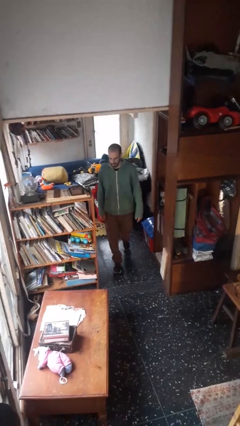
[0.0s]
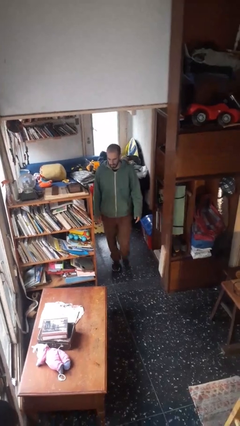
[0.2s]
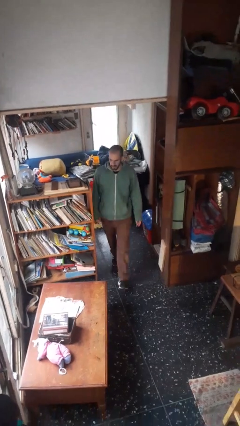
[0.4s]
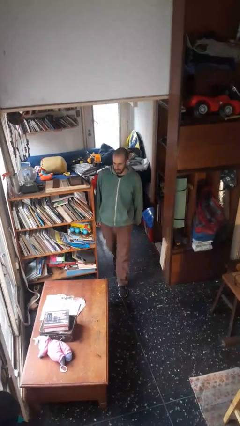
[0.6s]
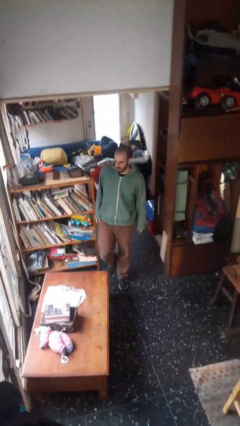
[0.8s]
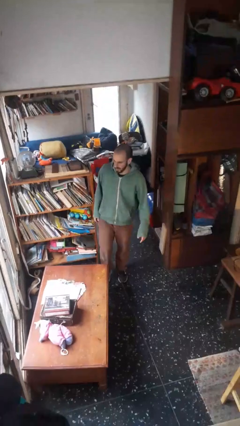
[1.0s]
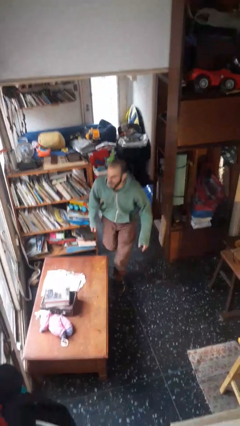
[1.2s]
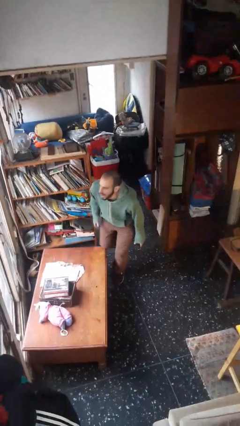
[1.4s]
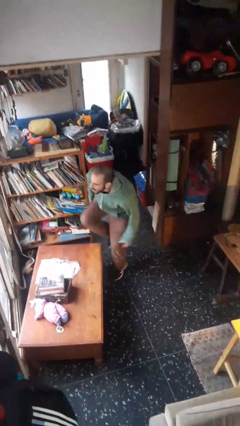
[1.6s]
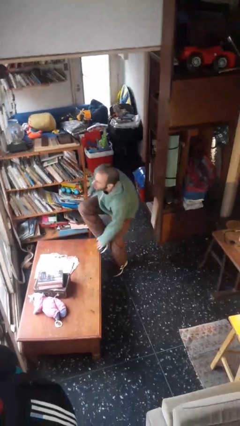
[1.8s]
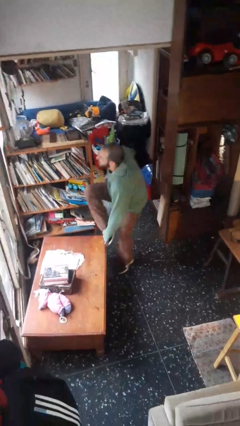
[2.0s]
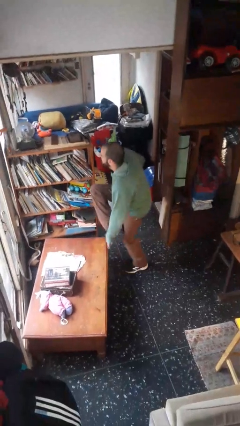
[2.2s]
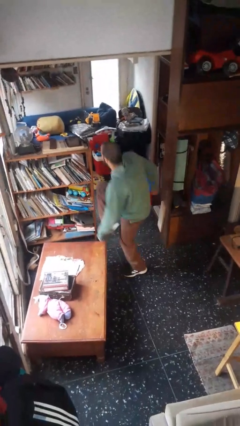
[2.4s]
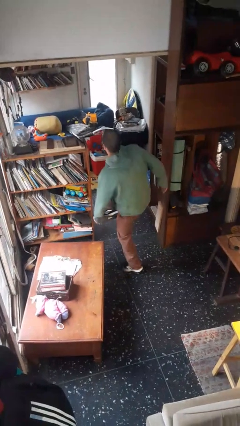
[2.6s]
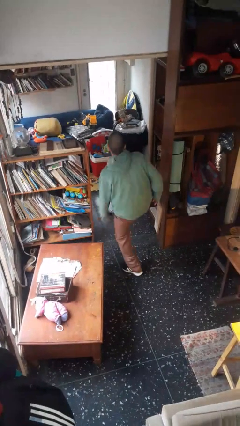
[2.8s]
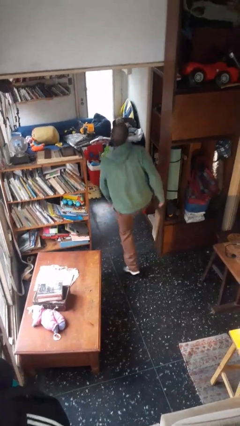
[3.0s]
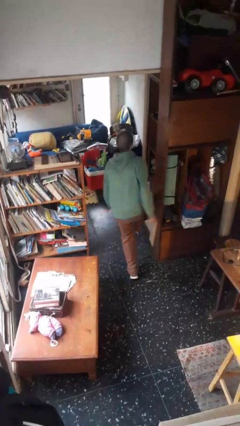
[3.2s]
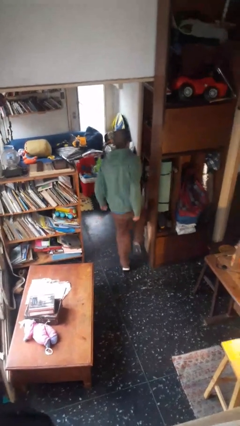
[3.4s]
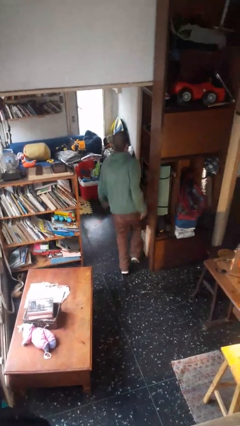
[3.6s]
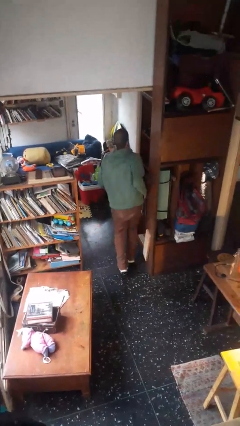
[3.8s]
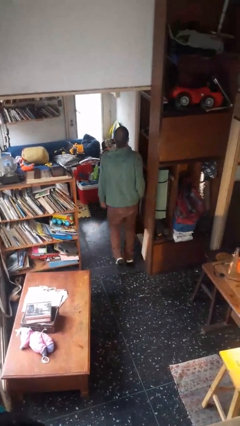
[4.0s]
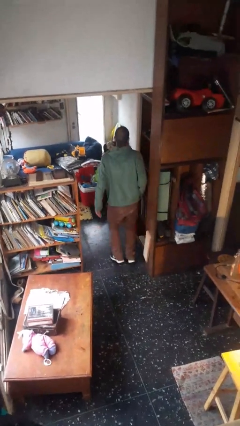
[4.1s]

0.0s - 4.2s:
person bumps into table

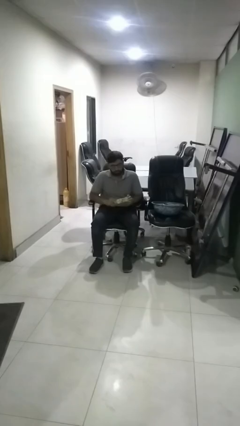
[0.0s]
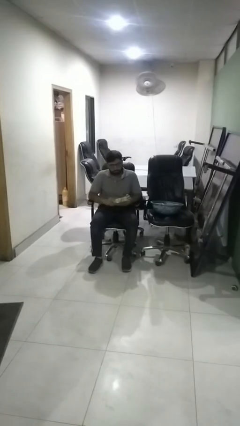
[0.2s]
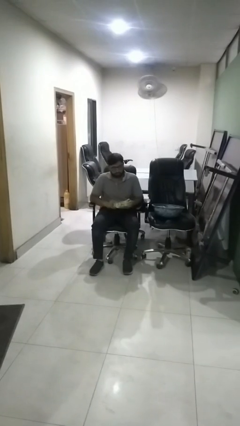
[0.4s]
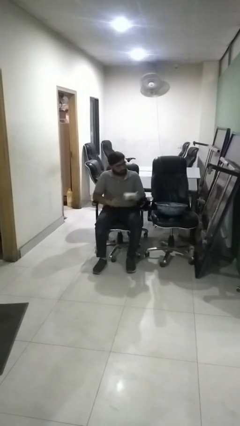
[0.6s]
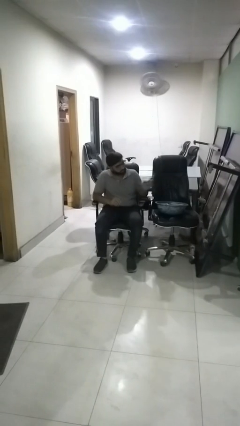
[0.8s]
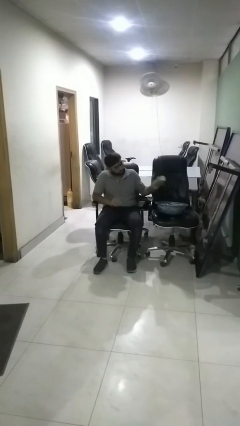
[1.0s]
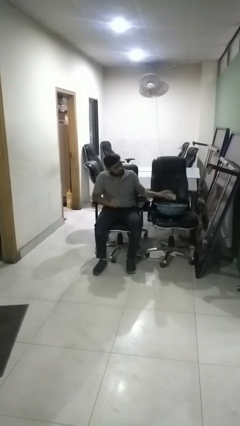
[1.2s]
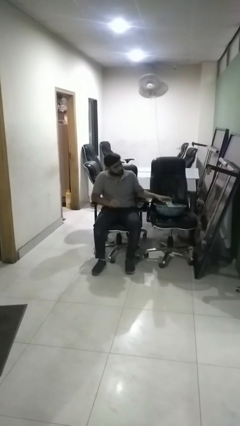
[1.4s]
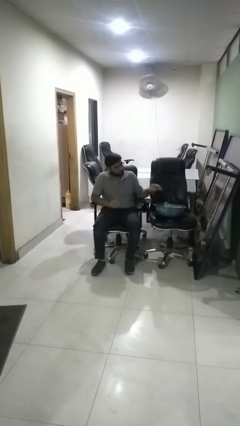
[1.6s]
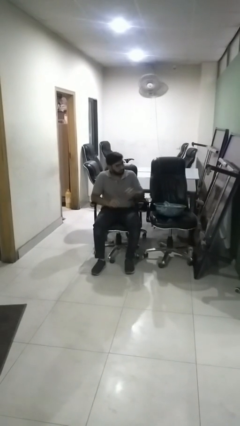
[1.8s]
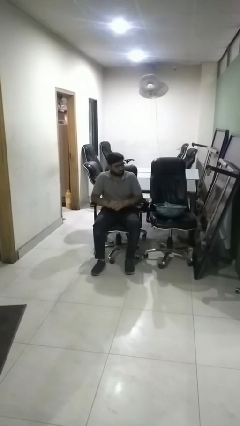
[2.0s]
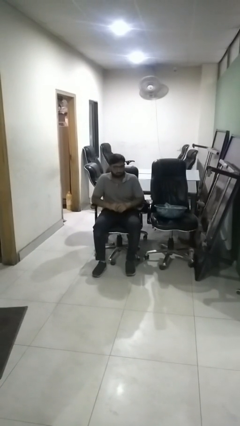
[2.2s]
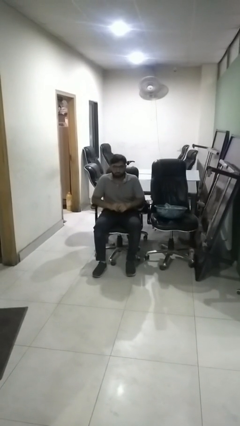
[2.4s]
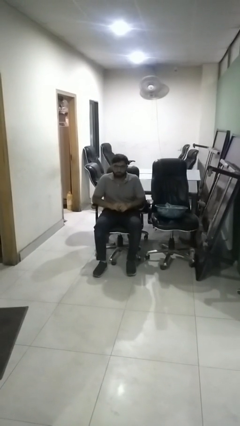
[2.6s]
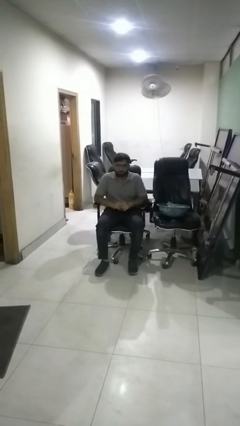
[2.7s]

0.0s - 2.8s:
person puts object into basket

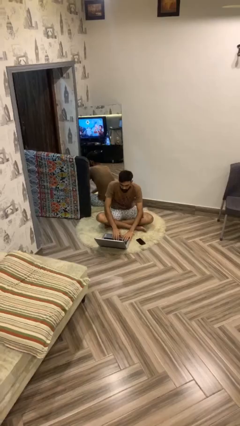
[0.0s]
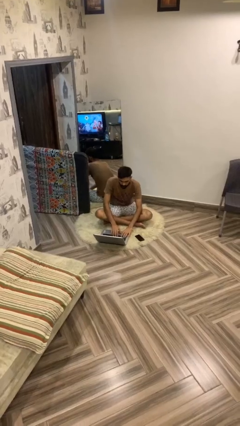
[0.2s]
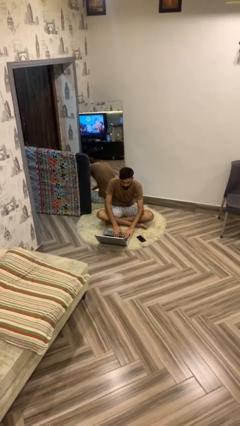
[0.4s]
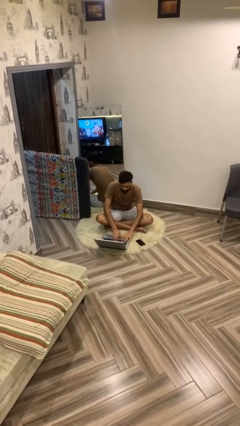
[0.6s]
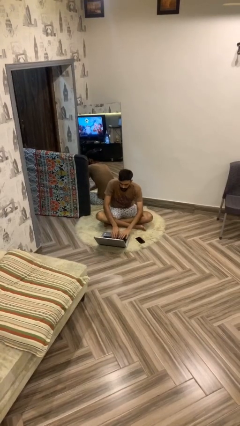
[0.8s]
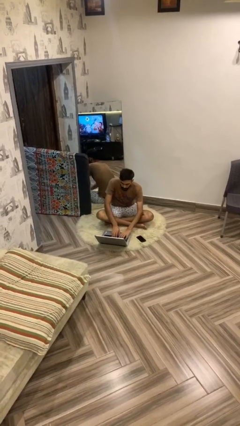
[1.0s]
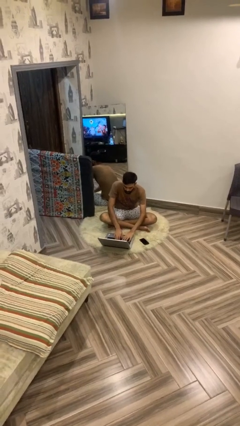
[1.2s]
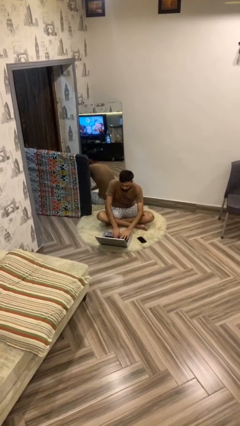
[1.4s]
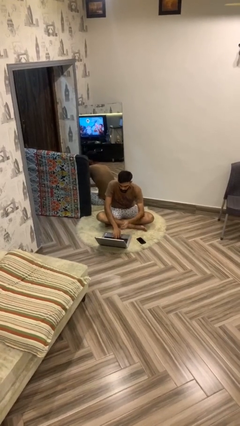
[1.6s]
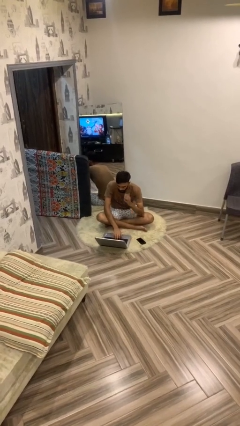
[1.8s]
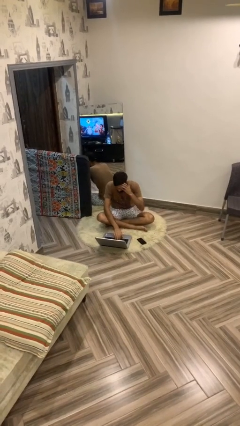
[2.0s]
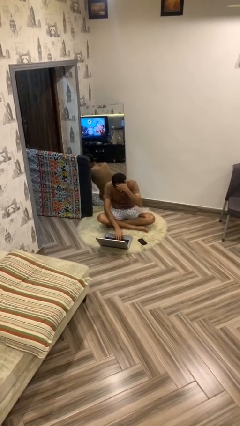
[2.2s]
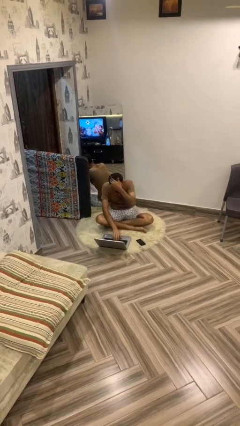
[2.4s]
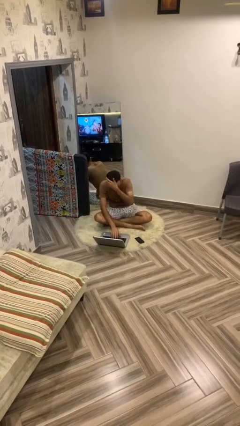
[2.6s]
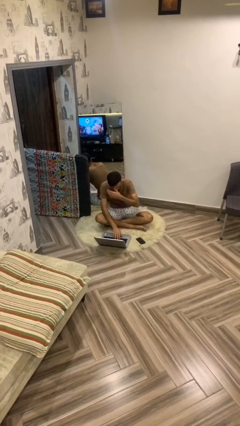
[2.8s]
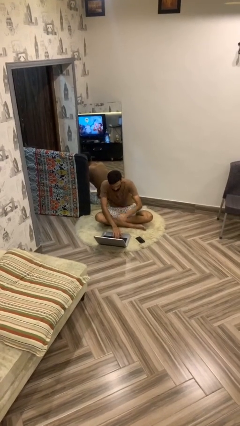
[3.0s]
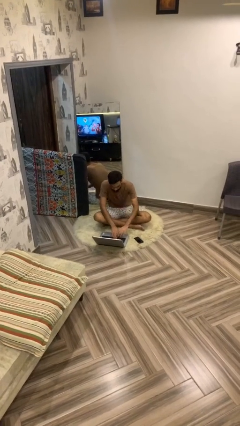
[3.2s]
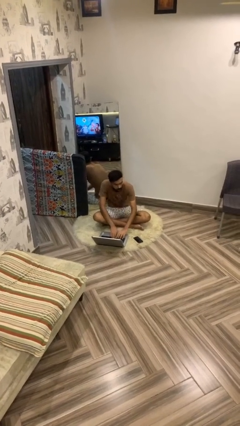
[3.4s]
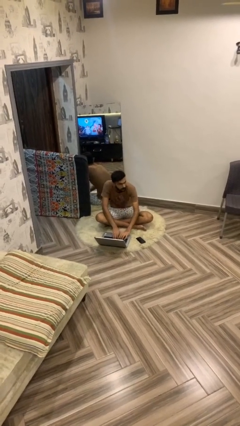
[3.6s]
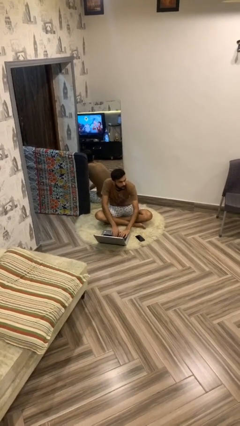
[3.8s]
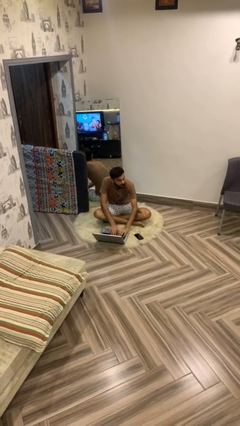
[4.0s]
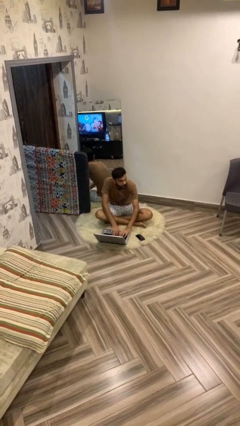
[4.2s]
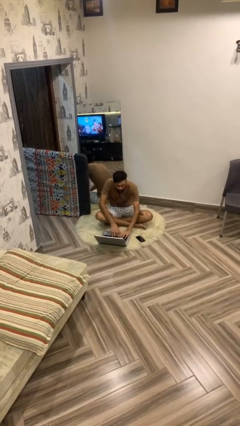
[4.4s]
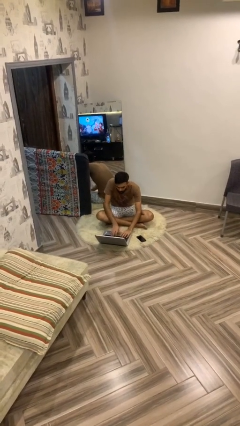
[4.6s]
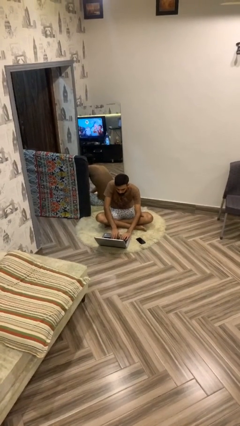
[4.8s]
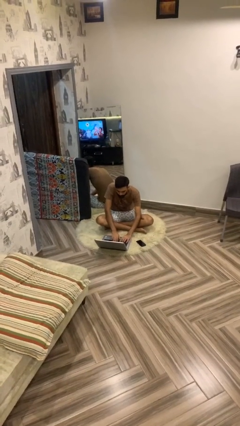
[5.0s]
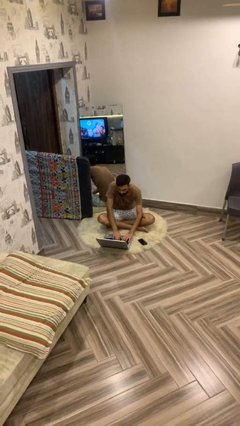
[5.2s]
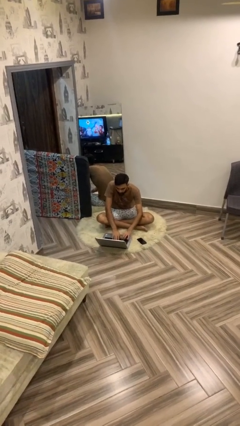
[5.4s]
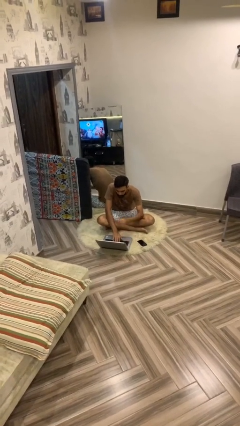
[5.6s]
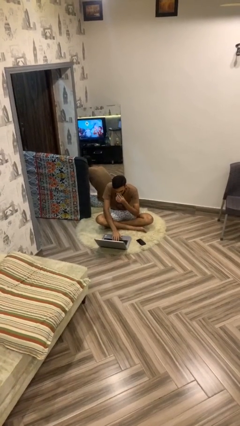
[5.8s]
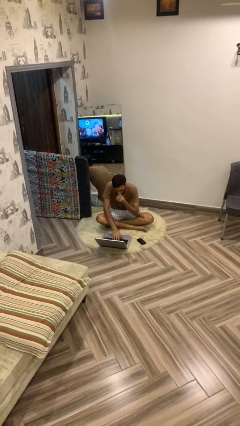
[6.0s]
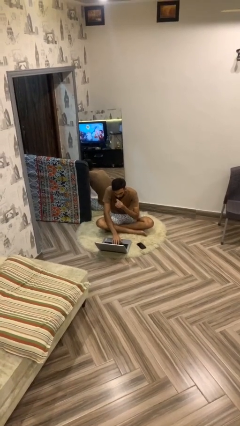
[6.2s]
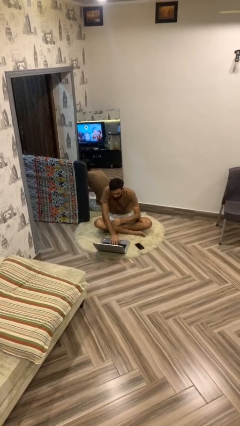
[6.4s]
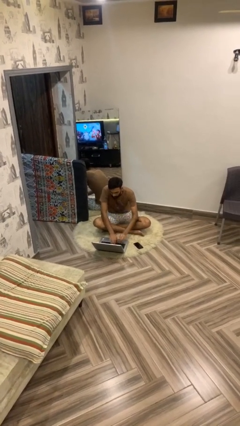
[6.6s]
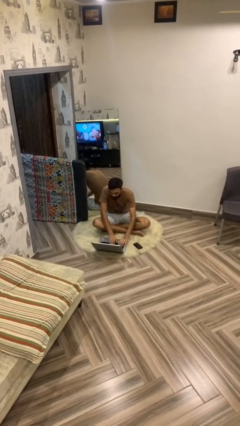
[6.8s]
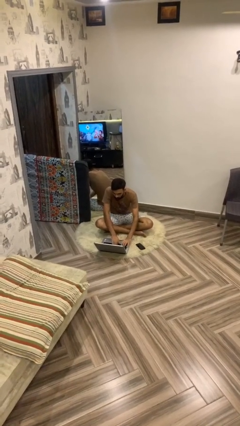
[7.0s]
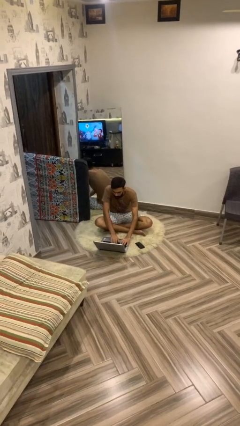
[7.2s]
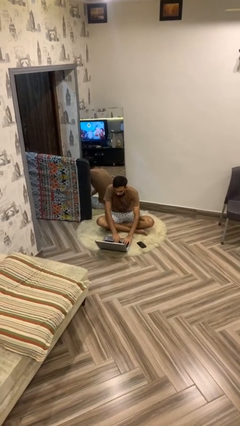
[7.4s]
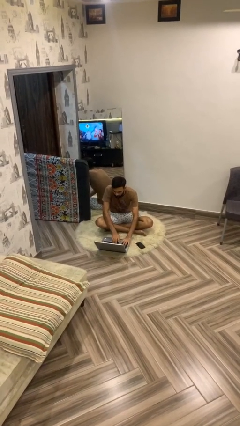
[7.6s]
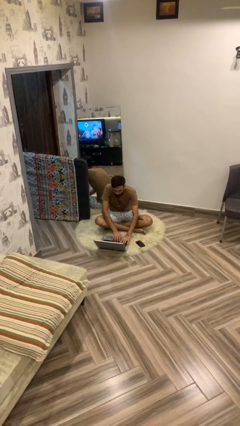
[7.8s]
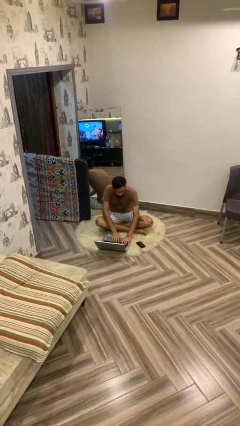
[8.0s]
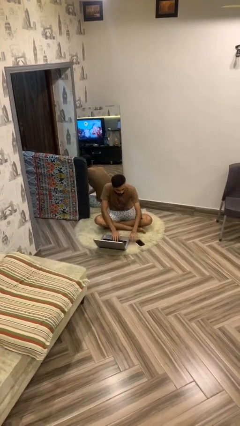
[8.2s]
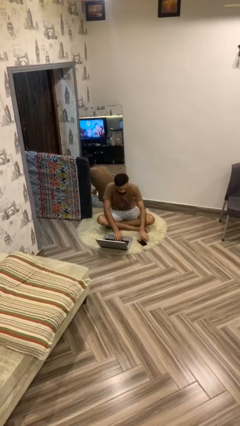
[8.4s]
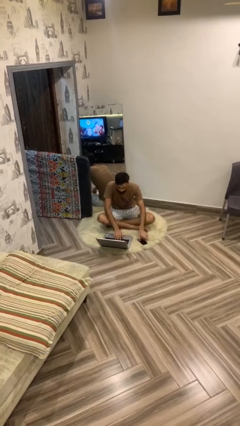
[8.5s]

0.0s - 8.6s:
person interacts with laptop

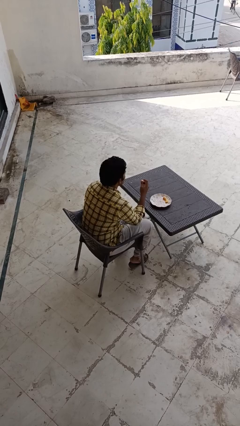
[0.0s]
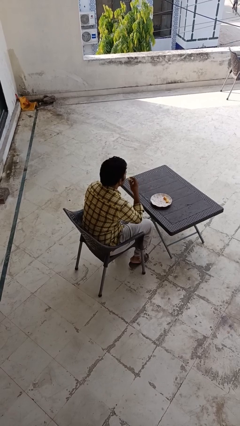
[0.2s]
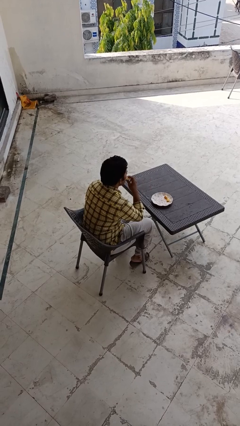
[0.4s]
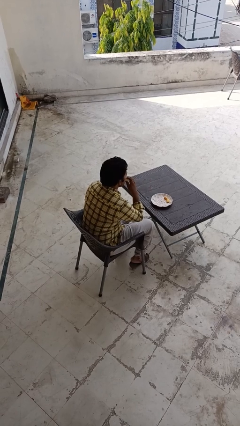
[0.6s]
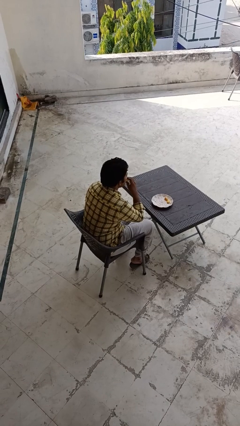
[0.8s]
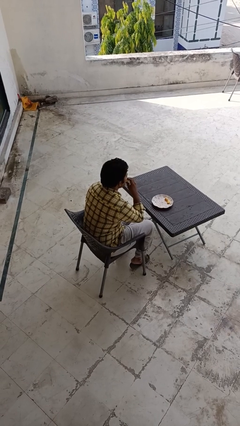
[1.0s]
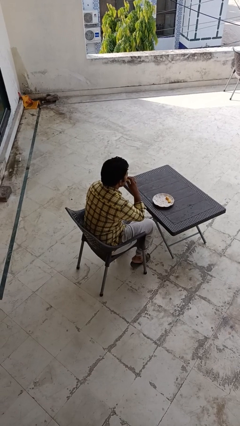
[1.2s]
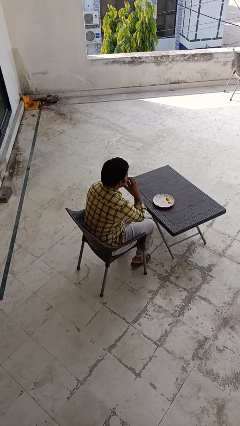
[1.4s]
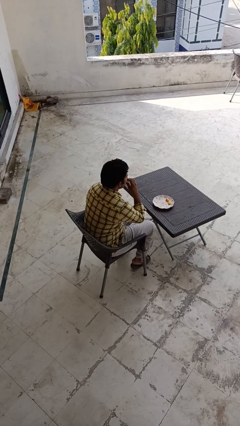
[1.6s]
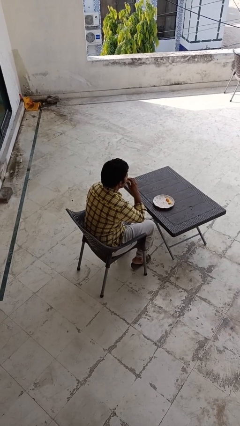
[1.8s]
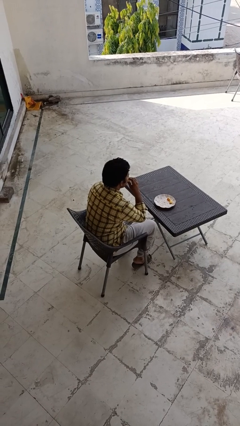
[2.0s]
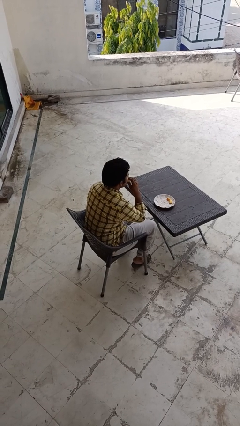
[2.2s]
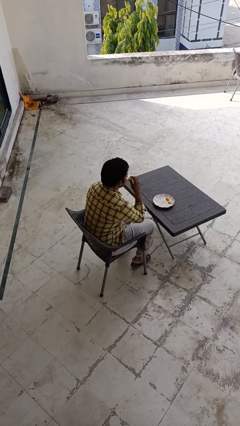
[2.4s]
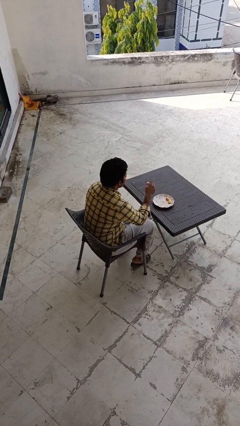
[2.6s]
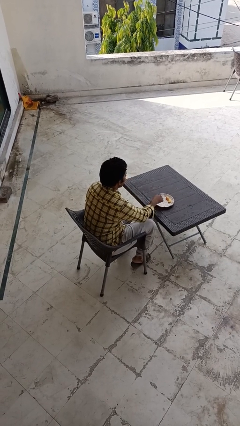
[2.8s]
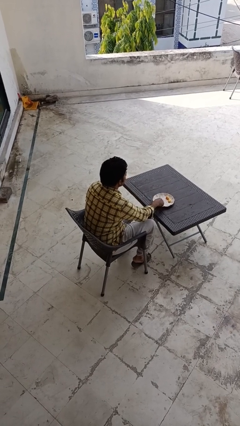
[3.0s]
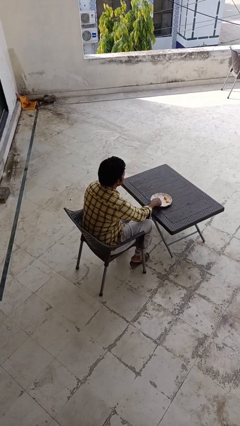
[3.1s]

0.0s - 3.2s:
person eats with hands
